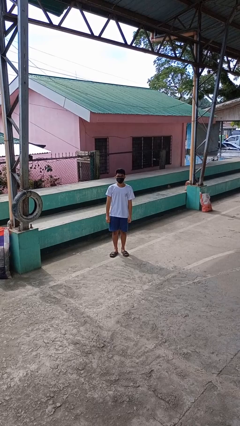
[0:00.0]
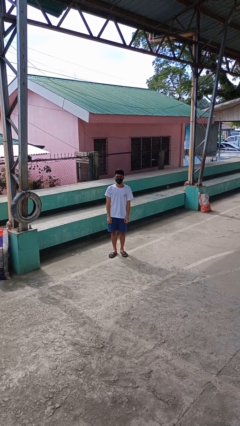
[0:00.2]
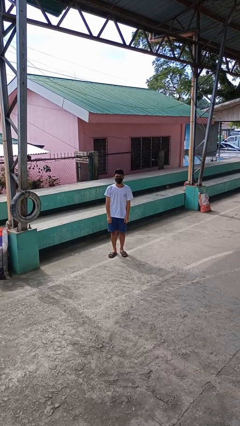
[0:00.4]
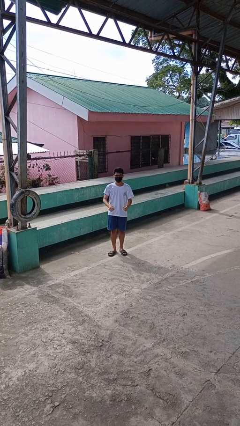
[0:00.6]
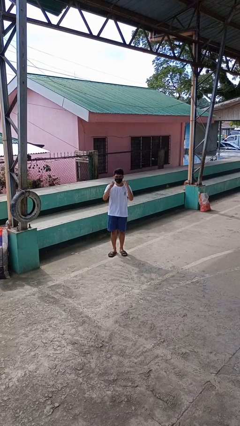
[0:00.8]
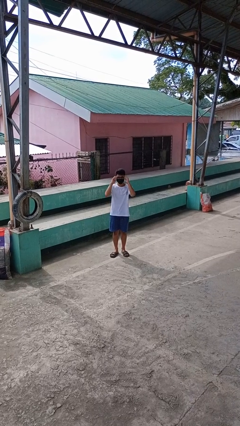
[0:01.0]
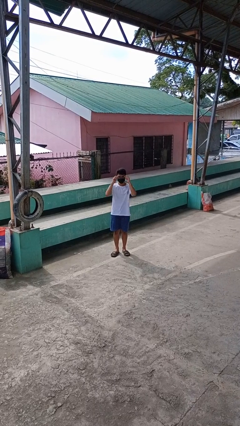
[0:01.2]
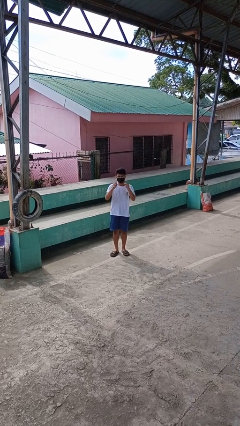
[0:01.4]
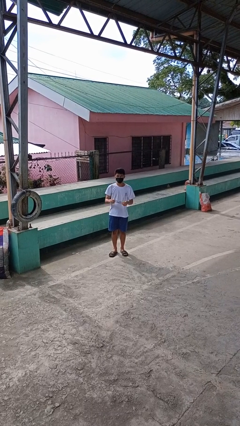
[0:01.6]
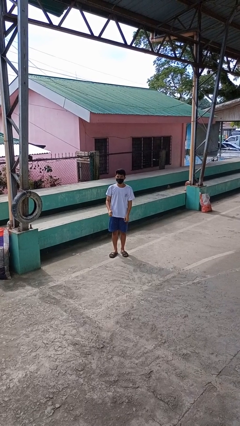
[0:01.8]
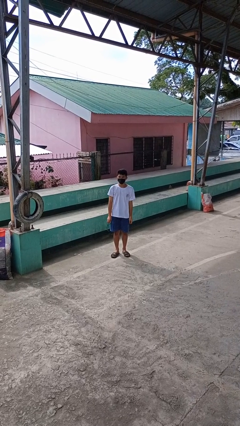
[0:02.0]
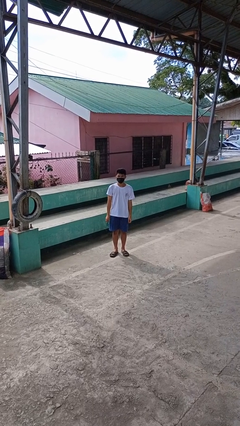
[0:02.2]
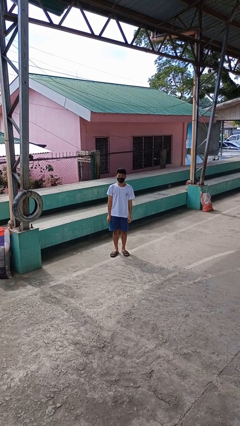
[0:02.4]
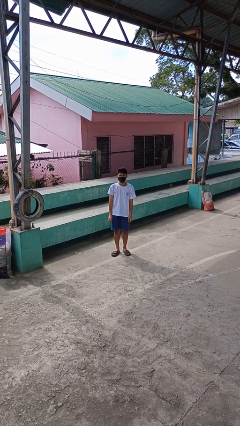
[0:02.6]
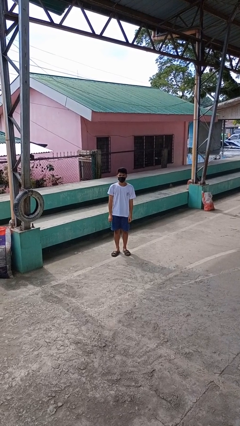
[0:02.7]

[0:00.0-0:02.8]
person takes off glasses

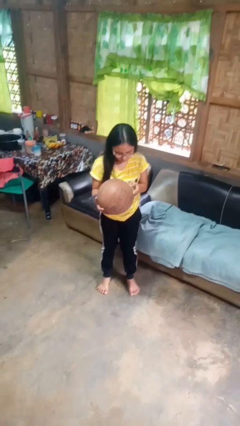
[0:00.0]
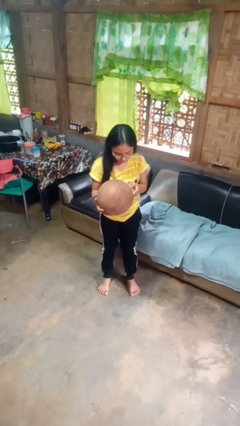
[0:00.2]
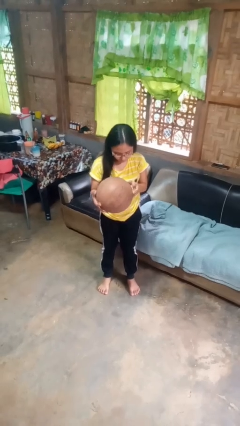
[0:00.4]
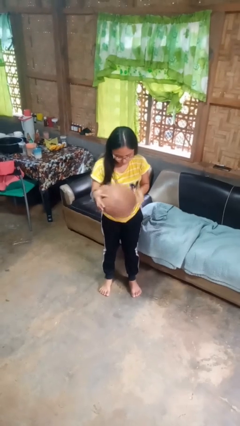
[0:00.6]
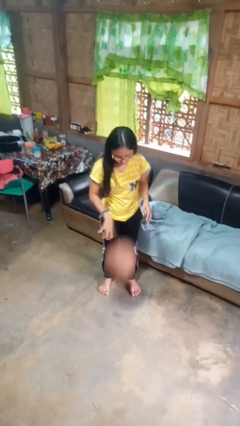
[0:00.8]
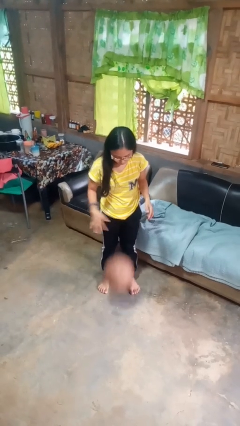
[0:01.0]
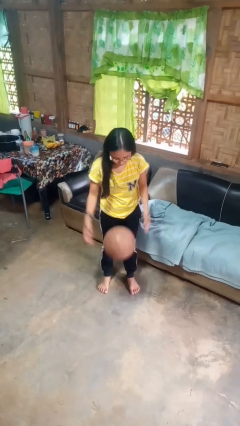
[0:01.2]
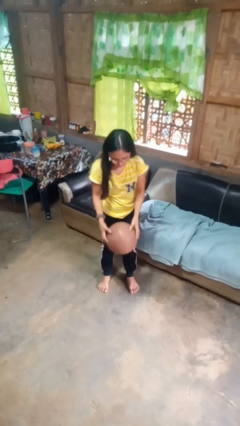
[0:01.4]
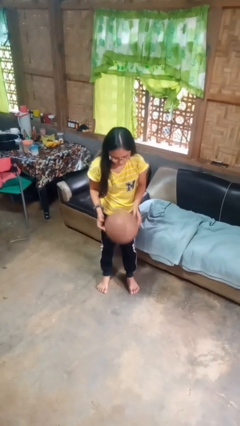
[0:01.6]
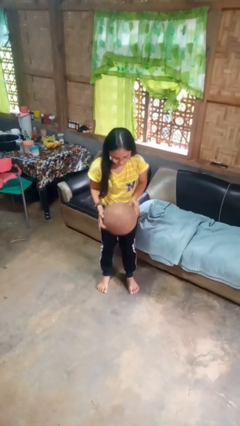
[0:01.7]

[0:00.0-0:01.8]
person bounces ball on floor

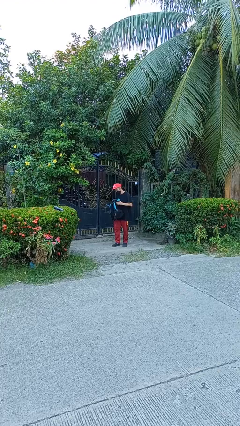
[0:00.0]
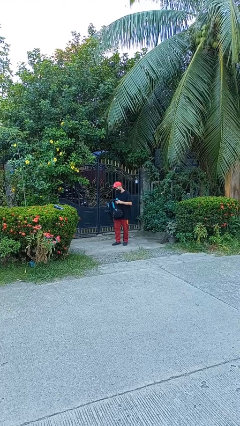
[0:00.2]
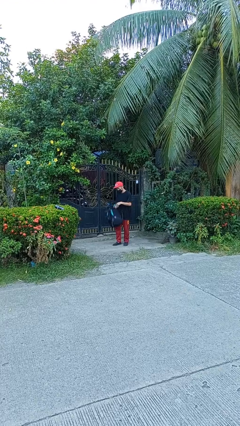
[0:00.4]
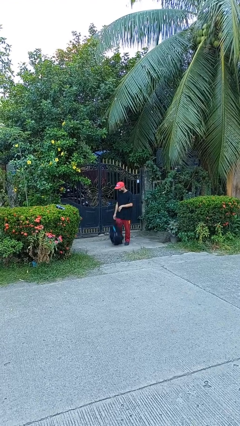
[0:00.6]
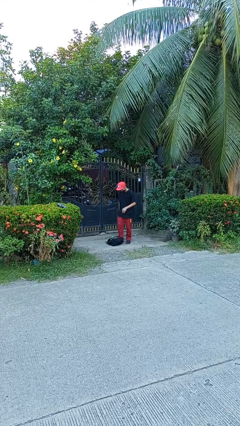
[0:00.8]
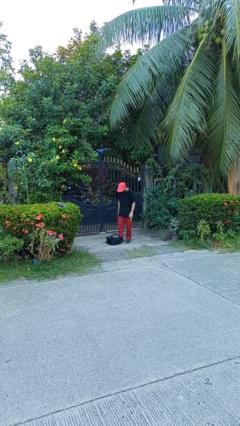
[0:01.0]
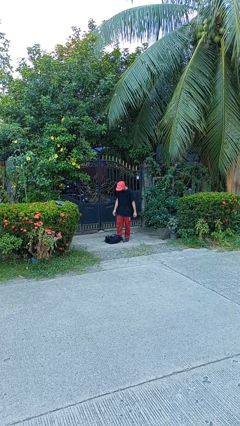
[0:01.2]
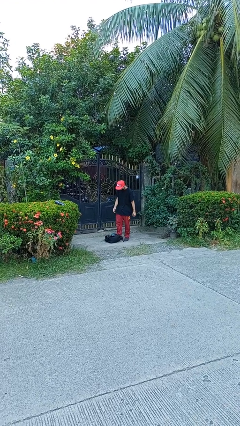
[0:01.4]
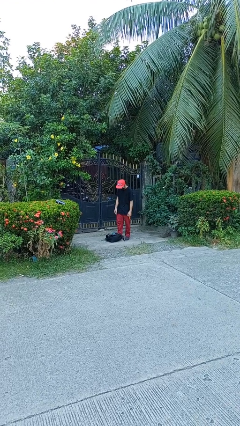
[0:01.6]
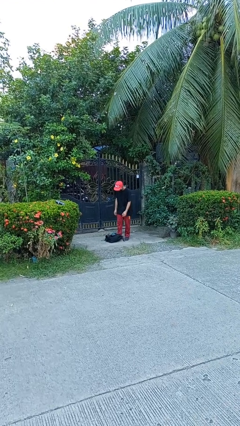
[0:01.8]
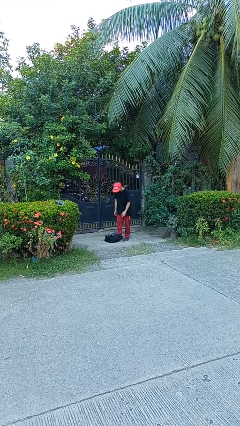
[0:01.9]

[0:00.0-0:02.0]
person drops object

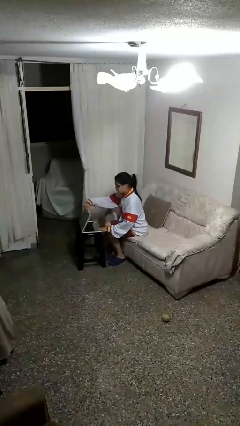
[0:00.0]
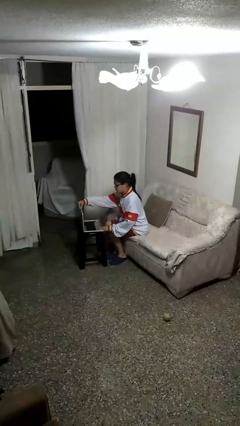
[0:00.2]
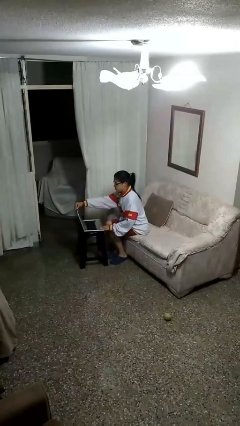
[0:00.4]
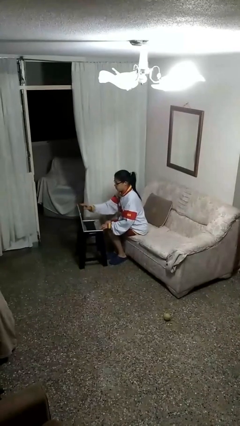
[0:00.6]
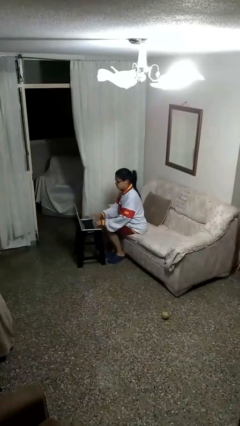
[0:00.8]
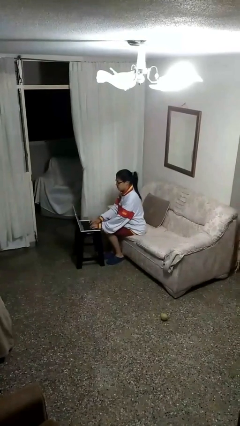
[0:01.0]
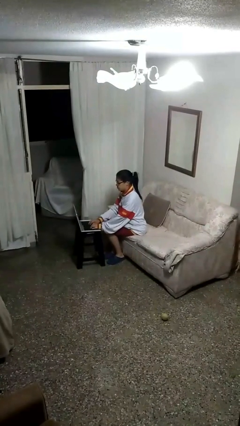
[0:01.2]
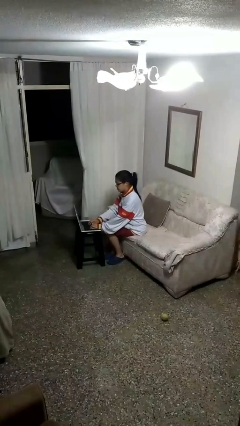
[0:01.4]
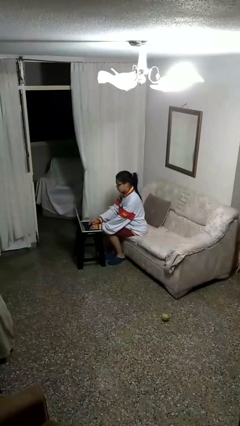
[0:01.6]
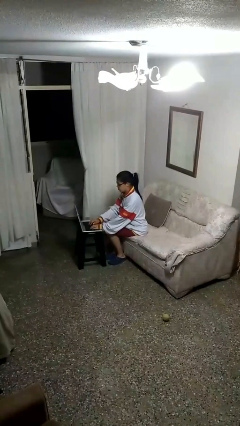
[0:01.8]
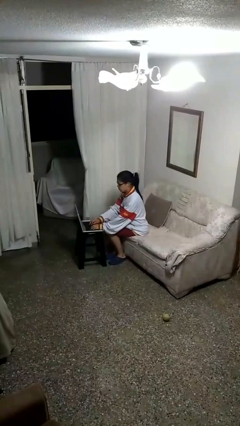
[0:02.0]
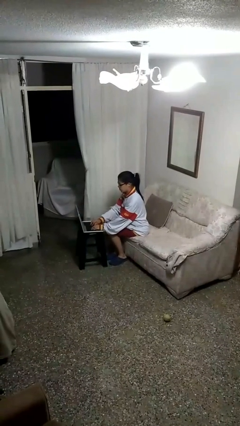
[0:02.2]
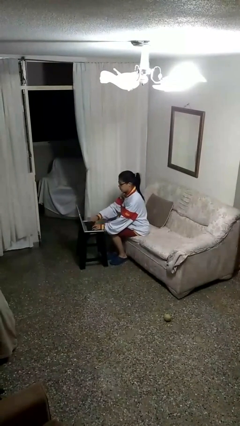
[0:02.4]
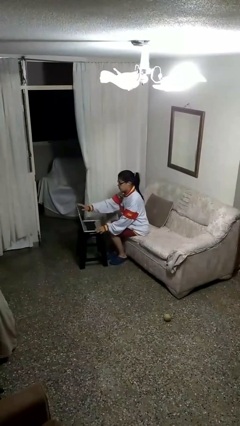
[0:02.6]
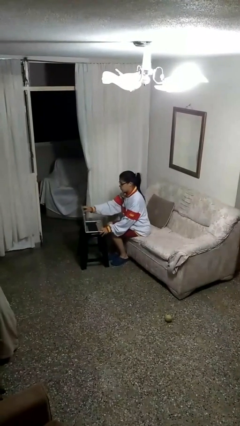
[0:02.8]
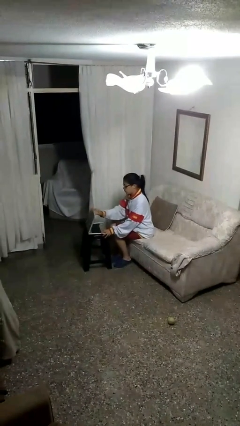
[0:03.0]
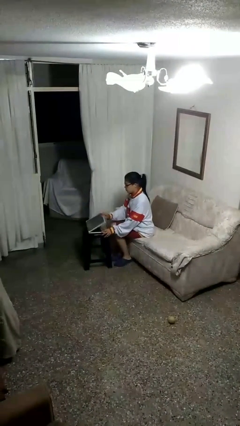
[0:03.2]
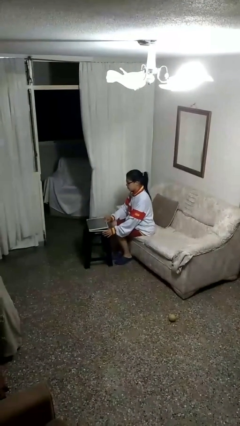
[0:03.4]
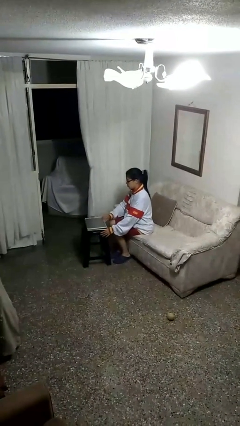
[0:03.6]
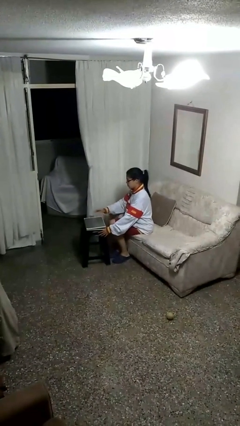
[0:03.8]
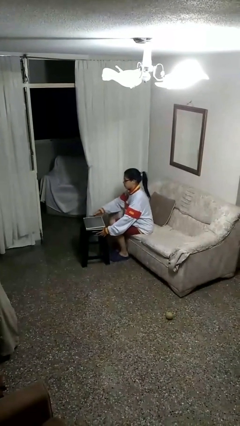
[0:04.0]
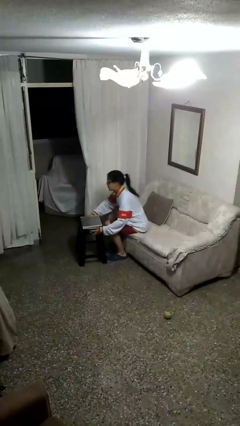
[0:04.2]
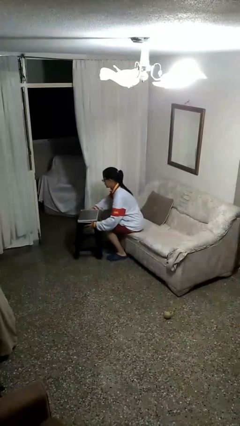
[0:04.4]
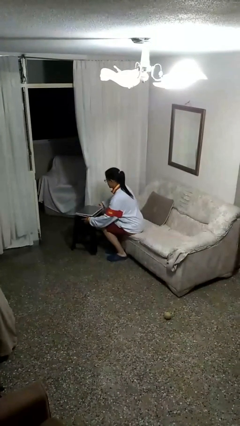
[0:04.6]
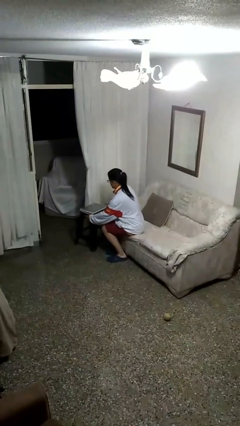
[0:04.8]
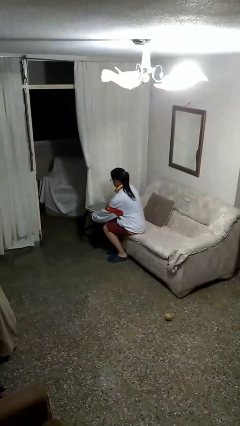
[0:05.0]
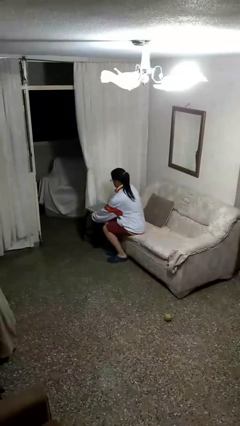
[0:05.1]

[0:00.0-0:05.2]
person interacts with laptop

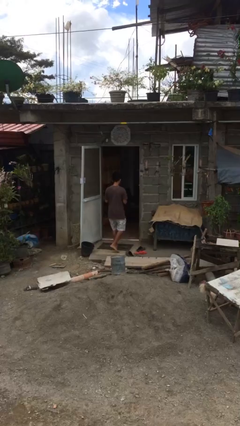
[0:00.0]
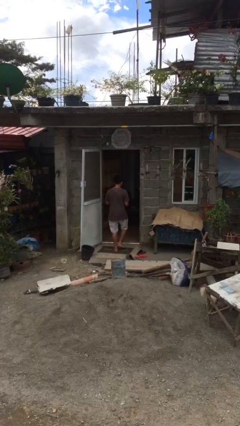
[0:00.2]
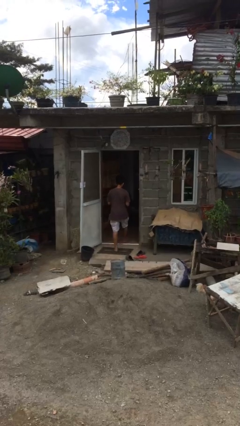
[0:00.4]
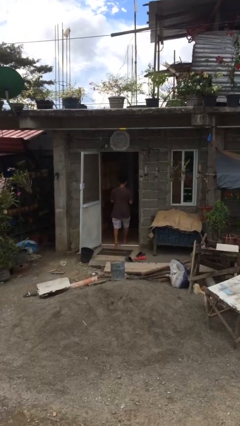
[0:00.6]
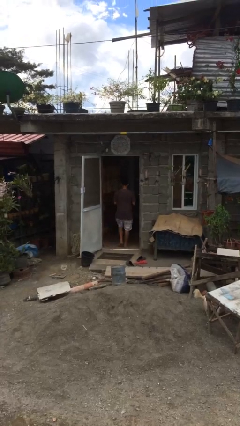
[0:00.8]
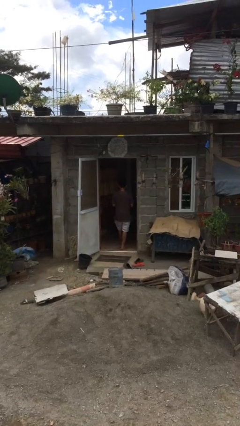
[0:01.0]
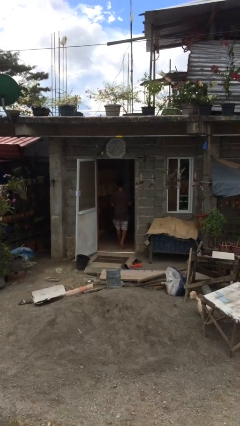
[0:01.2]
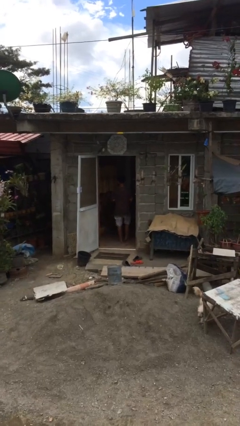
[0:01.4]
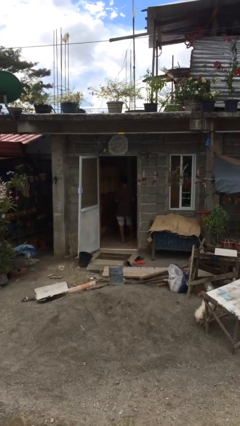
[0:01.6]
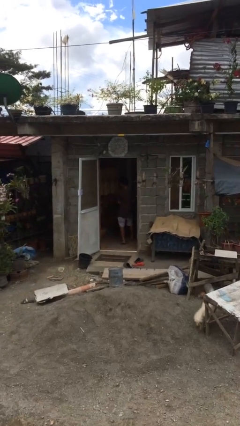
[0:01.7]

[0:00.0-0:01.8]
person exits scene through structure

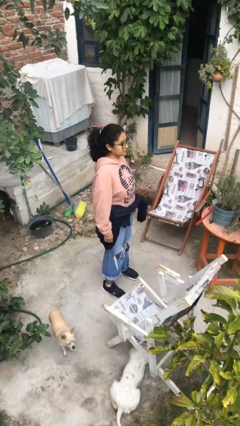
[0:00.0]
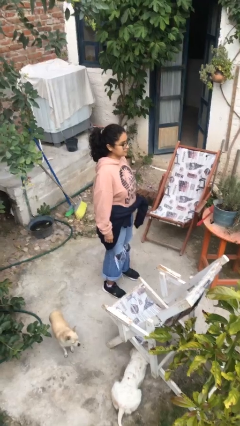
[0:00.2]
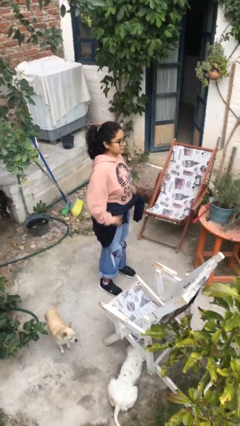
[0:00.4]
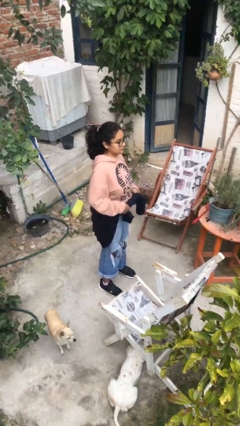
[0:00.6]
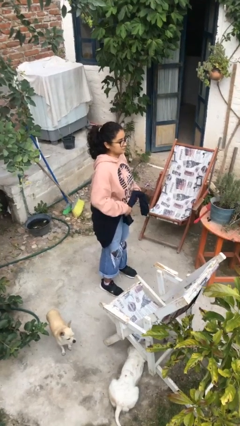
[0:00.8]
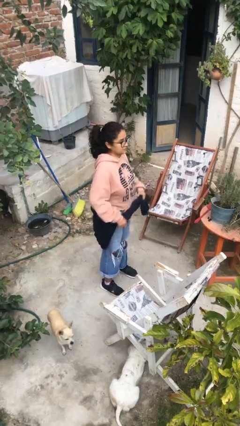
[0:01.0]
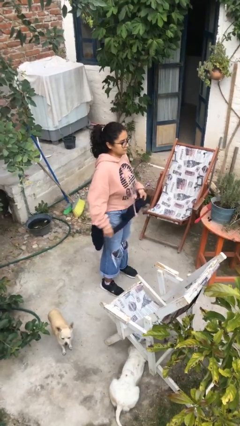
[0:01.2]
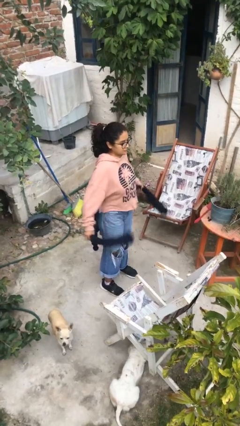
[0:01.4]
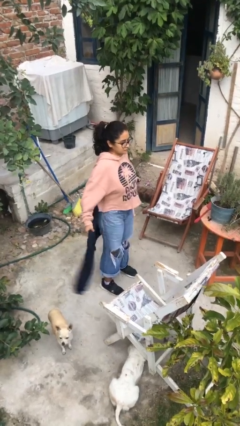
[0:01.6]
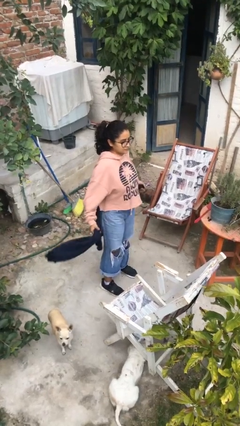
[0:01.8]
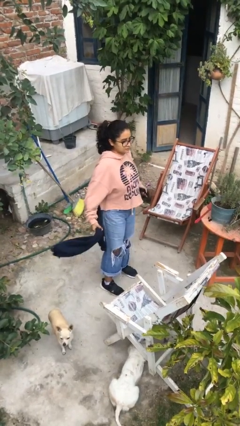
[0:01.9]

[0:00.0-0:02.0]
person unties jacket around waist

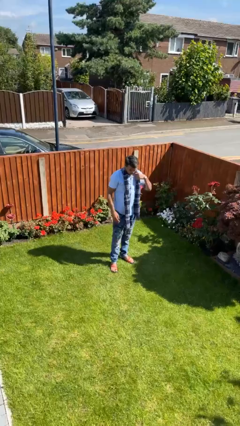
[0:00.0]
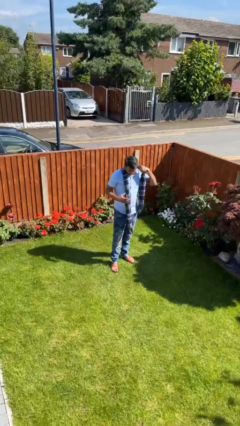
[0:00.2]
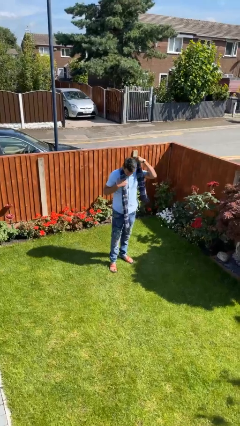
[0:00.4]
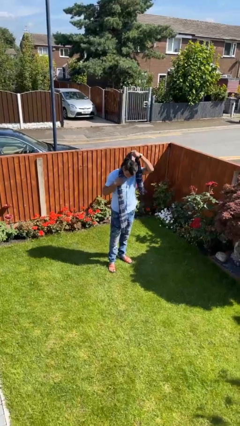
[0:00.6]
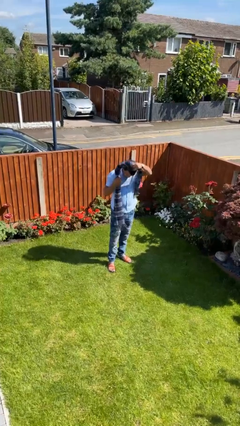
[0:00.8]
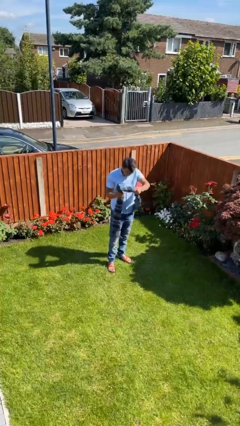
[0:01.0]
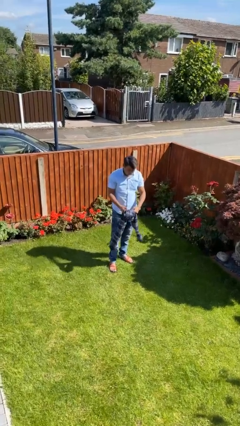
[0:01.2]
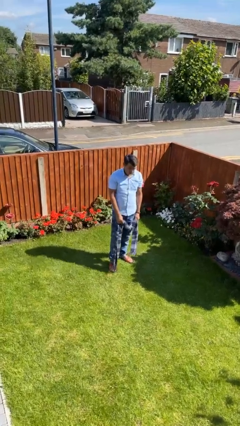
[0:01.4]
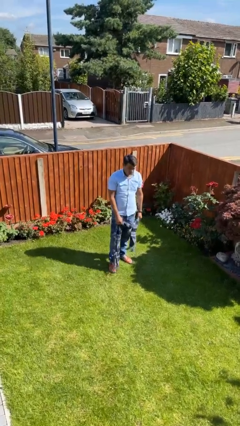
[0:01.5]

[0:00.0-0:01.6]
person takes off scarf
